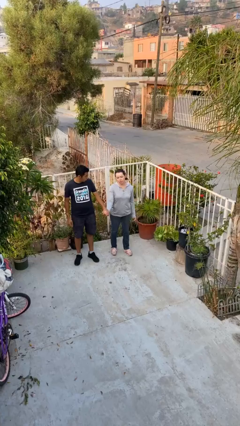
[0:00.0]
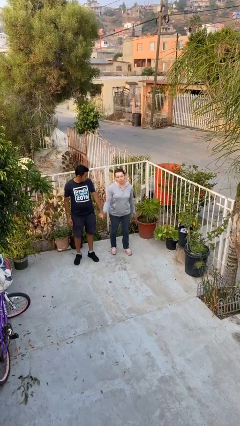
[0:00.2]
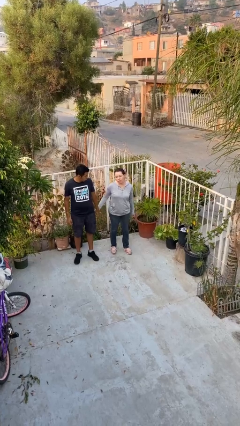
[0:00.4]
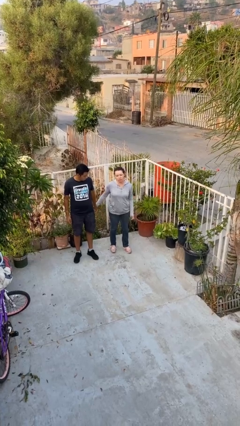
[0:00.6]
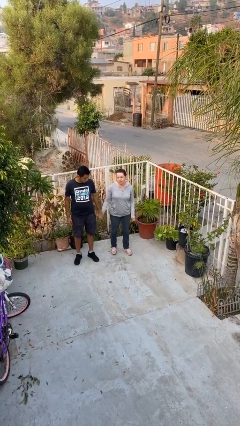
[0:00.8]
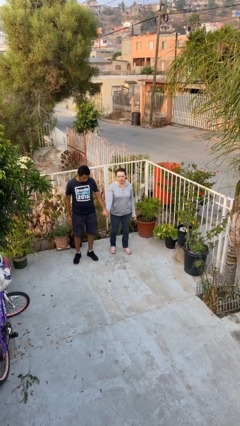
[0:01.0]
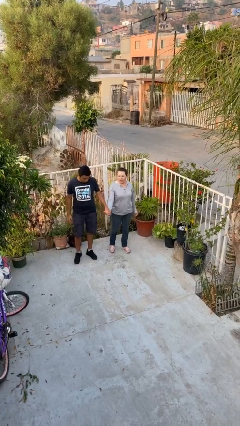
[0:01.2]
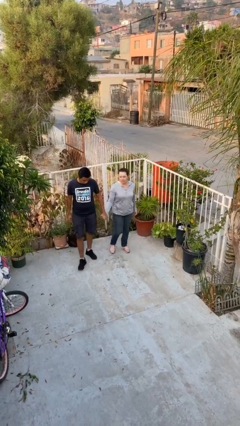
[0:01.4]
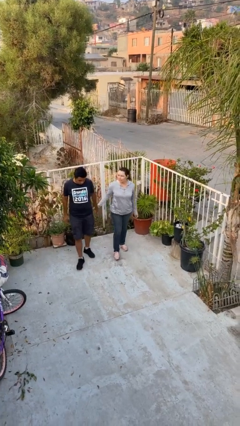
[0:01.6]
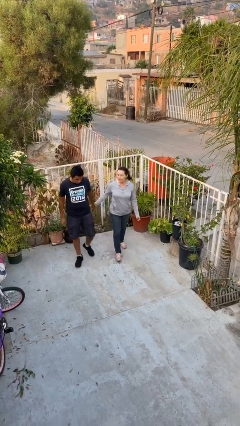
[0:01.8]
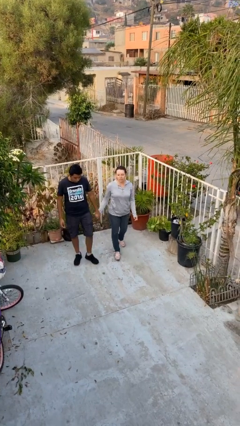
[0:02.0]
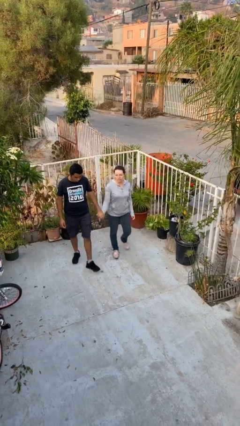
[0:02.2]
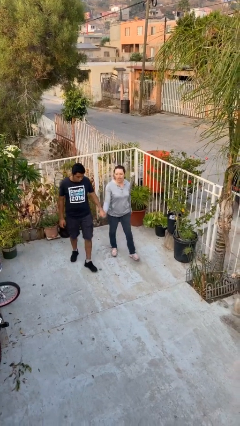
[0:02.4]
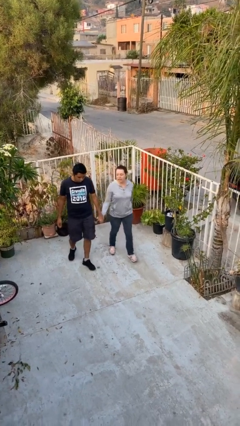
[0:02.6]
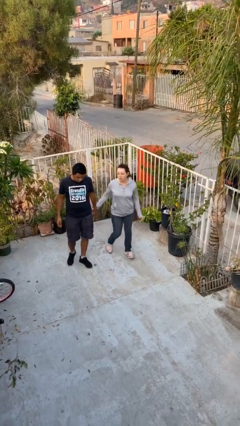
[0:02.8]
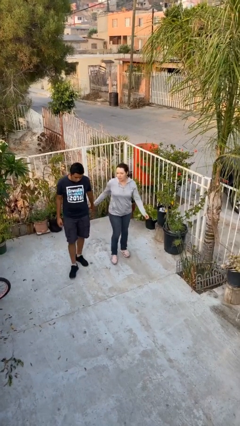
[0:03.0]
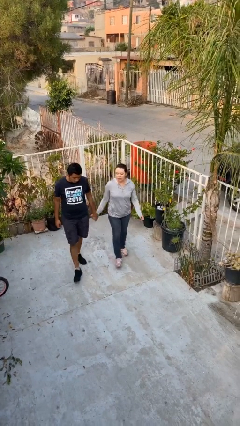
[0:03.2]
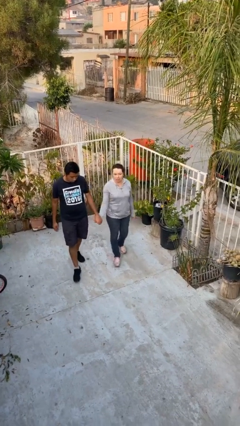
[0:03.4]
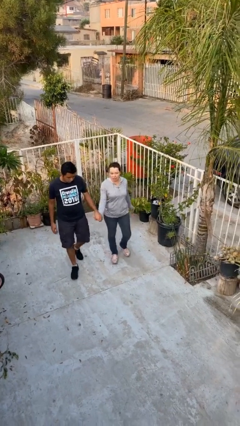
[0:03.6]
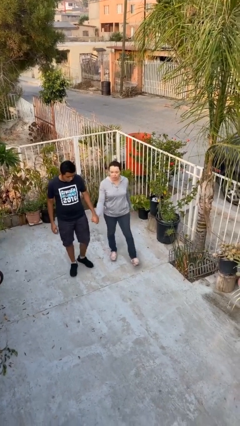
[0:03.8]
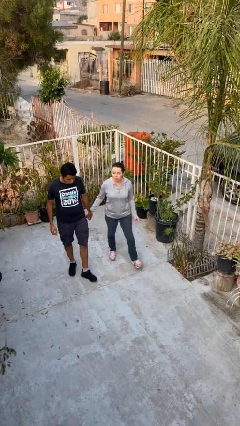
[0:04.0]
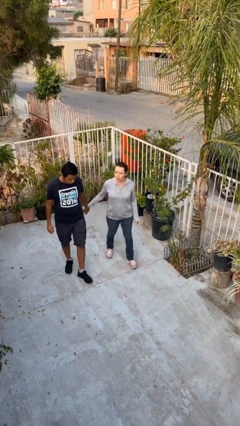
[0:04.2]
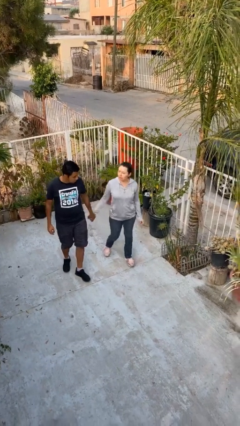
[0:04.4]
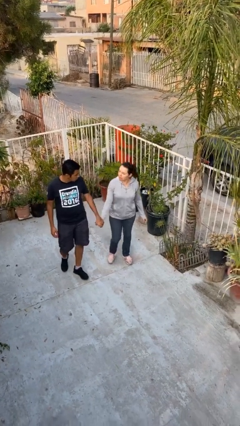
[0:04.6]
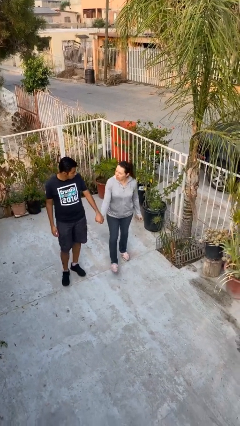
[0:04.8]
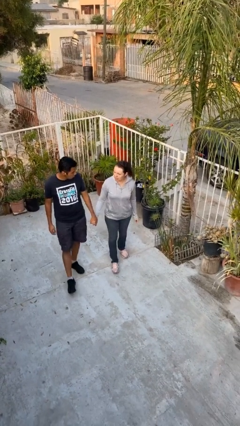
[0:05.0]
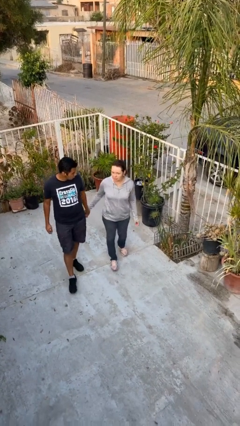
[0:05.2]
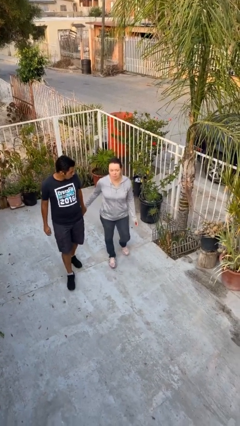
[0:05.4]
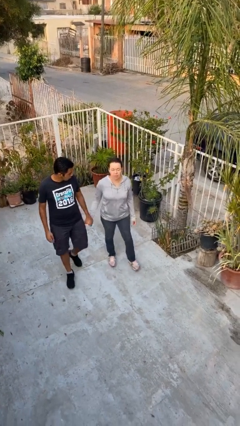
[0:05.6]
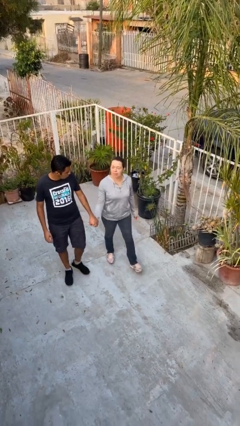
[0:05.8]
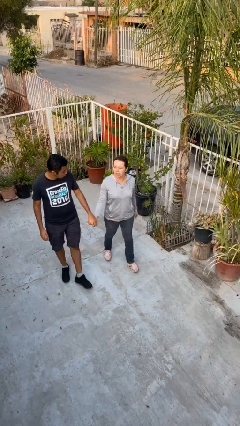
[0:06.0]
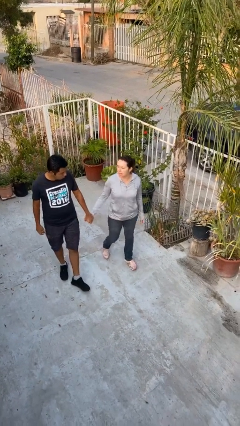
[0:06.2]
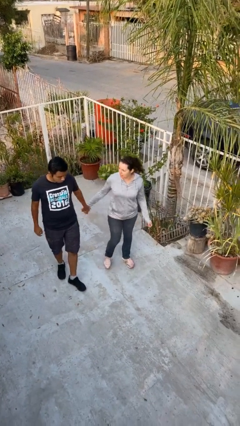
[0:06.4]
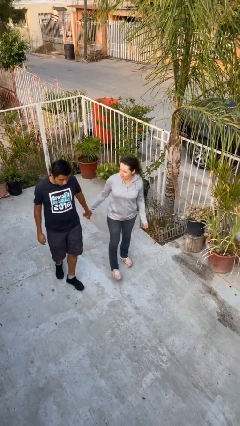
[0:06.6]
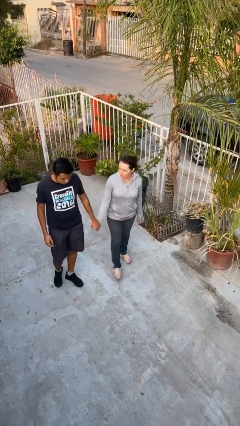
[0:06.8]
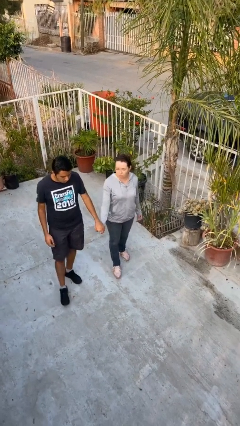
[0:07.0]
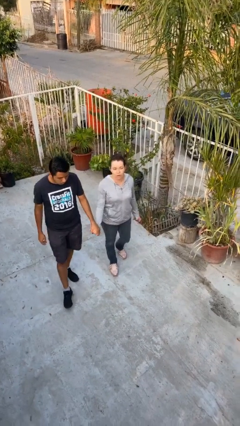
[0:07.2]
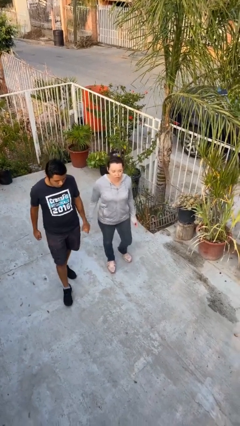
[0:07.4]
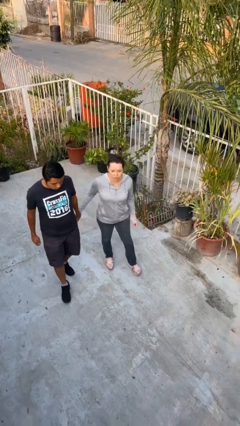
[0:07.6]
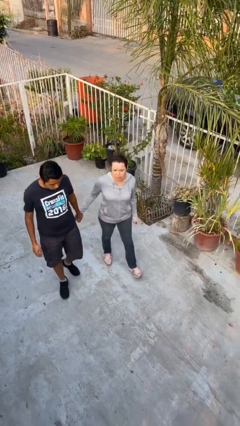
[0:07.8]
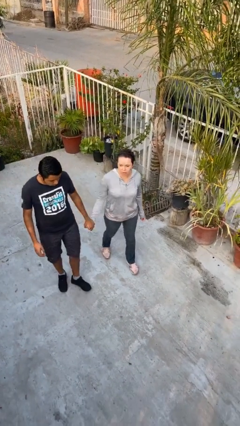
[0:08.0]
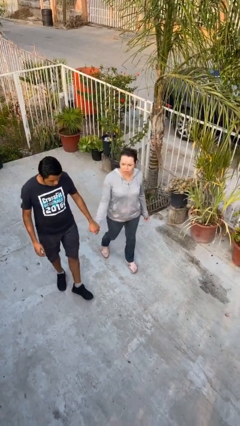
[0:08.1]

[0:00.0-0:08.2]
person holds hand

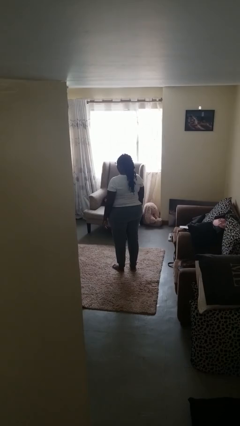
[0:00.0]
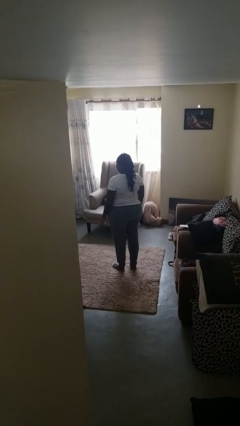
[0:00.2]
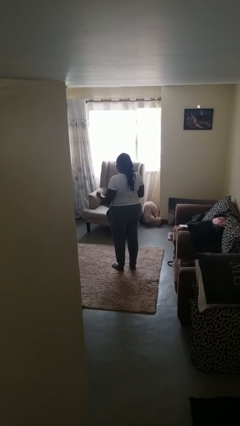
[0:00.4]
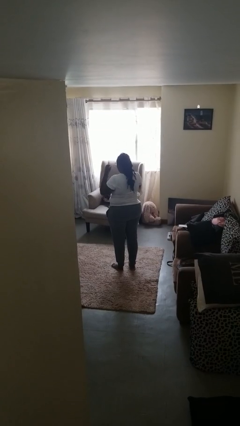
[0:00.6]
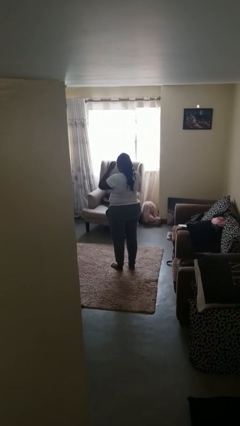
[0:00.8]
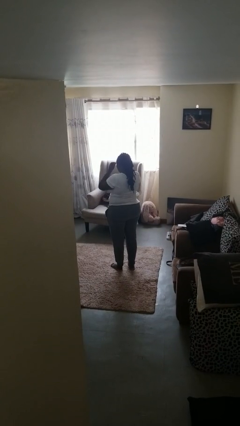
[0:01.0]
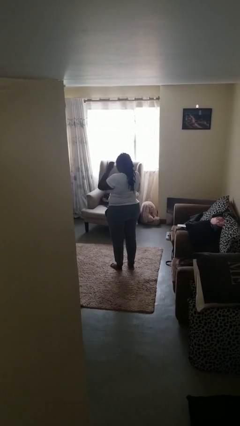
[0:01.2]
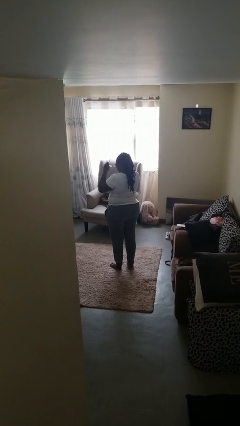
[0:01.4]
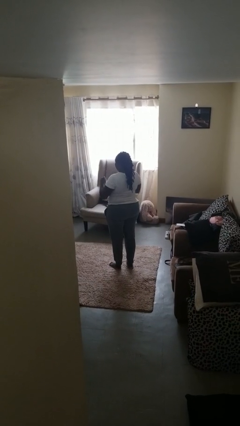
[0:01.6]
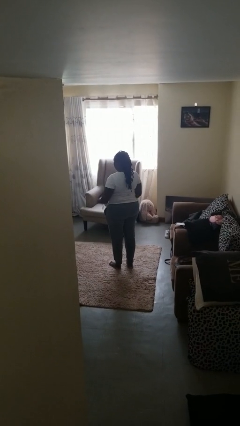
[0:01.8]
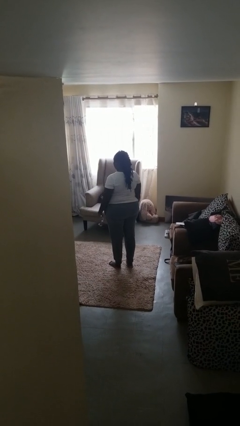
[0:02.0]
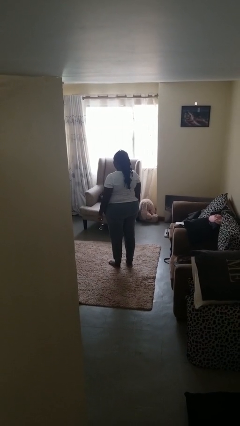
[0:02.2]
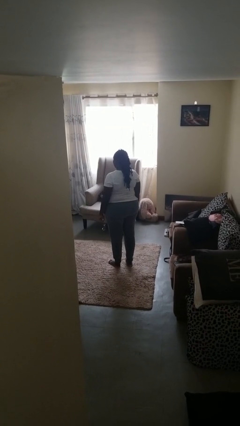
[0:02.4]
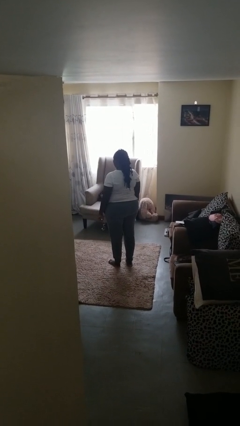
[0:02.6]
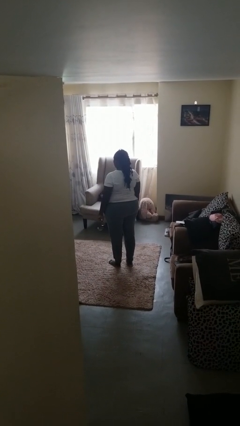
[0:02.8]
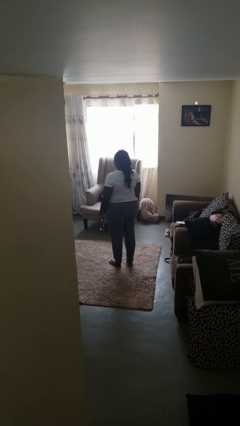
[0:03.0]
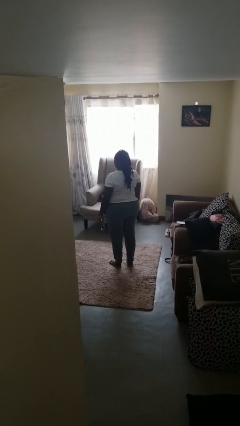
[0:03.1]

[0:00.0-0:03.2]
person takes off glasses

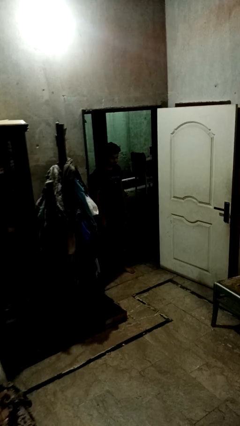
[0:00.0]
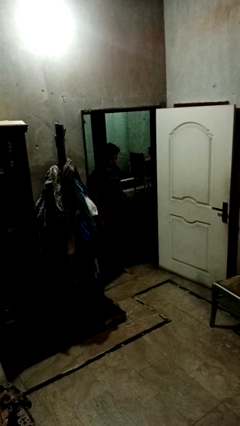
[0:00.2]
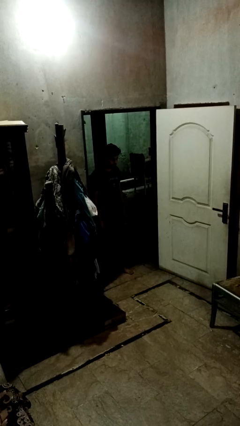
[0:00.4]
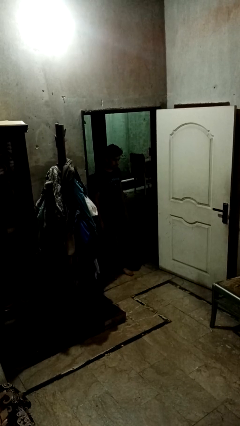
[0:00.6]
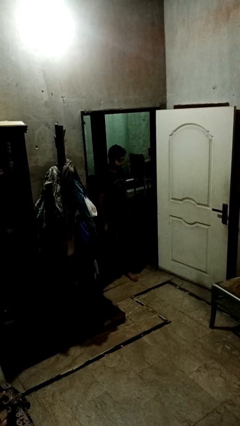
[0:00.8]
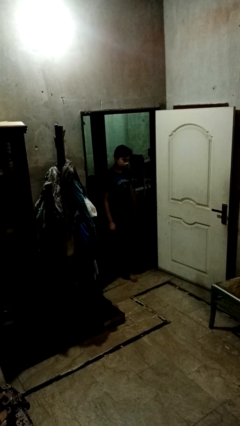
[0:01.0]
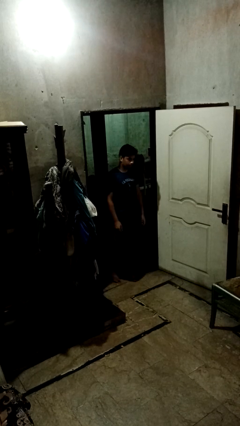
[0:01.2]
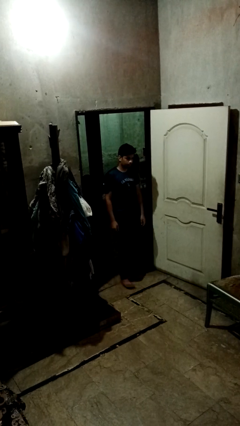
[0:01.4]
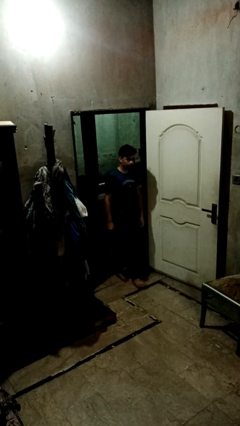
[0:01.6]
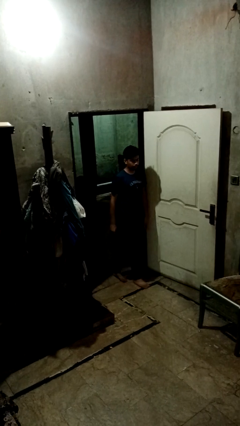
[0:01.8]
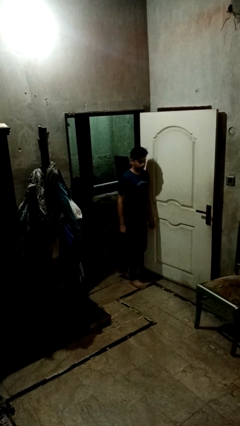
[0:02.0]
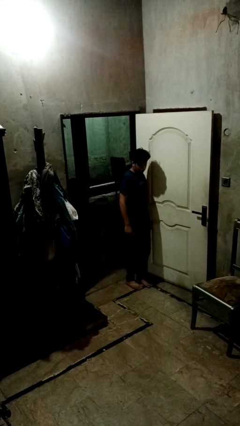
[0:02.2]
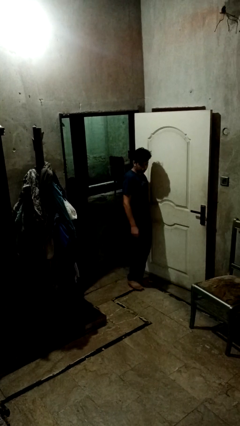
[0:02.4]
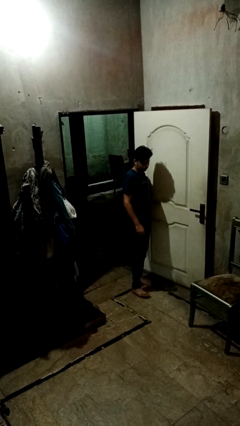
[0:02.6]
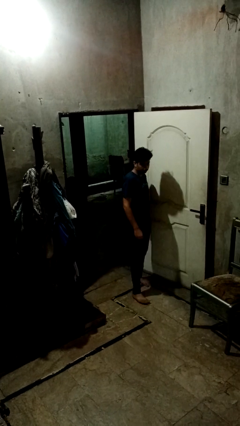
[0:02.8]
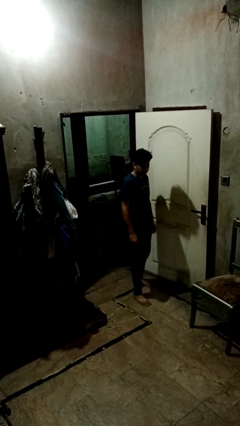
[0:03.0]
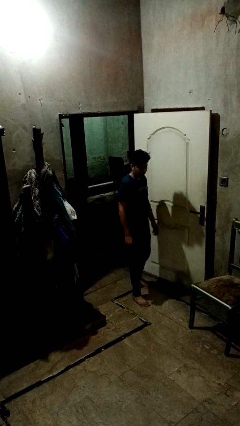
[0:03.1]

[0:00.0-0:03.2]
person bumps into wall

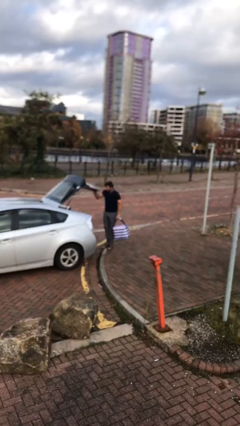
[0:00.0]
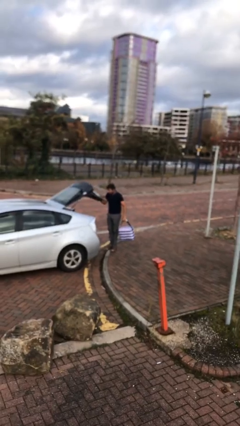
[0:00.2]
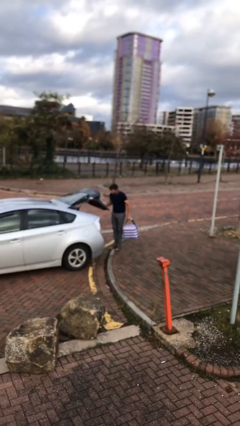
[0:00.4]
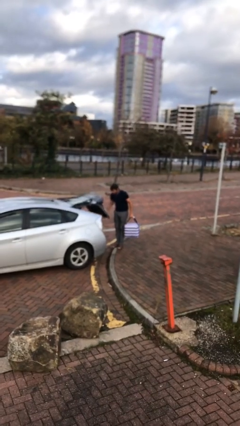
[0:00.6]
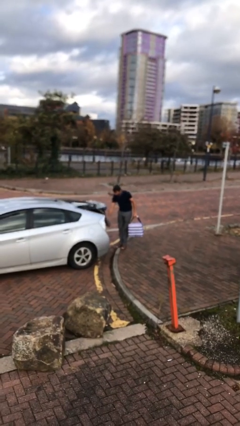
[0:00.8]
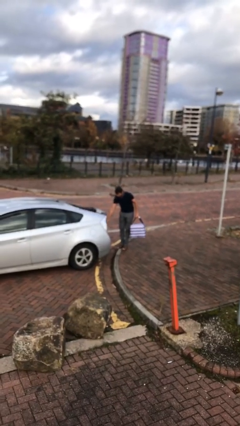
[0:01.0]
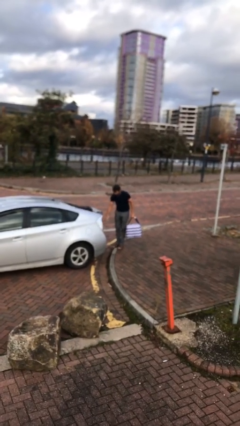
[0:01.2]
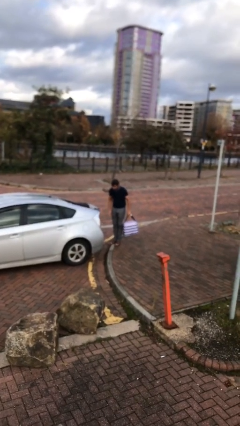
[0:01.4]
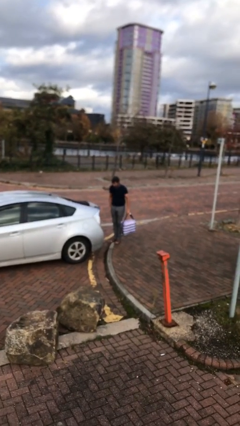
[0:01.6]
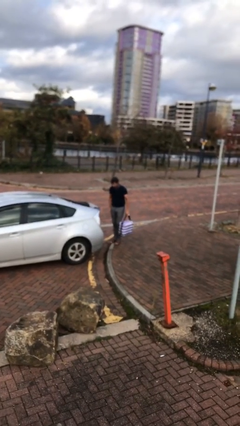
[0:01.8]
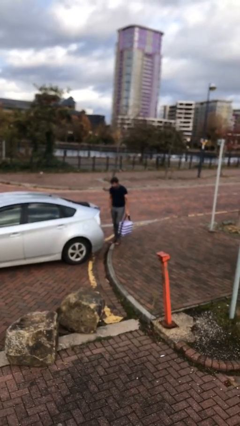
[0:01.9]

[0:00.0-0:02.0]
person closes car trunk

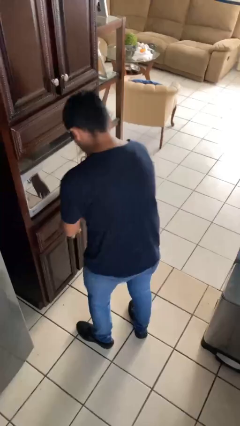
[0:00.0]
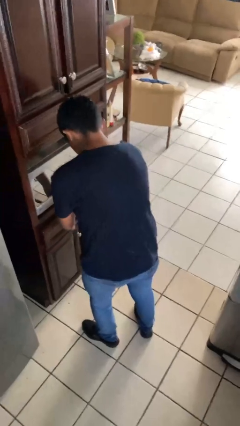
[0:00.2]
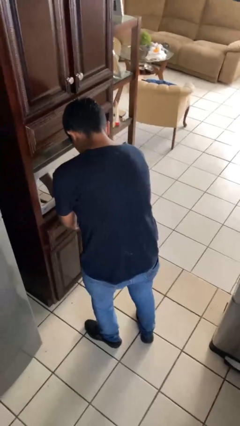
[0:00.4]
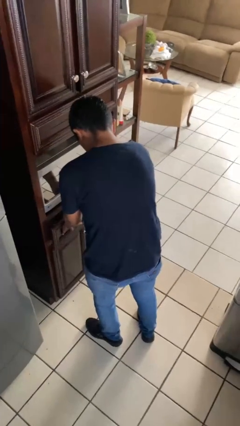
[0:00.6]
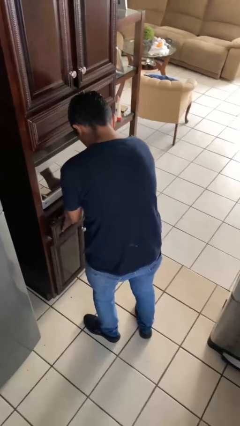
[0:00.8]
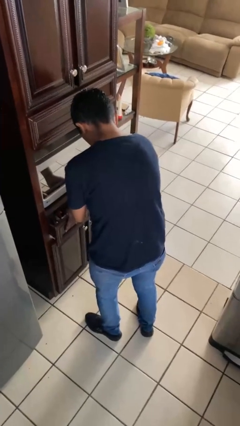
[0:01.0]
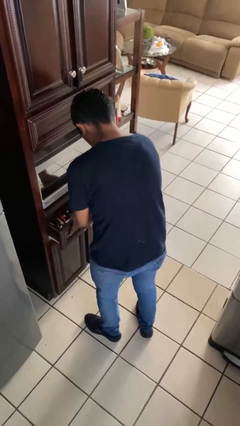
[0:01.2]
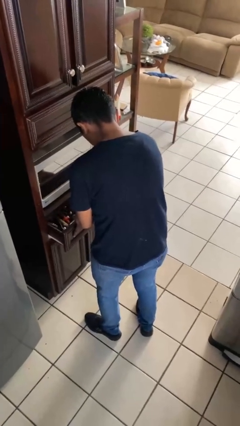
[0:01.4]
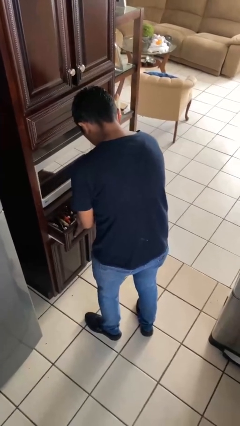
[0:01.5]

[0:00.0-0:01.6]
person opens kitchen drawer
